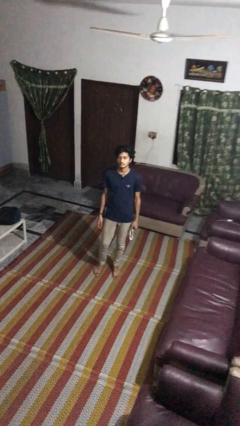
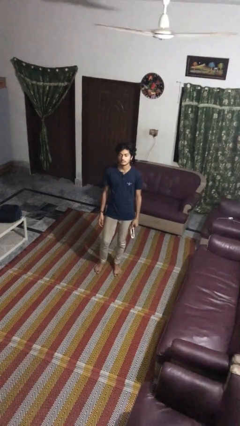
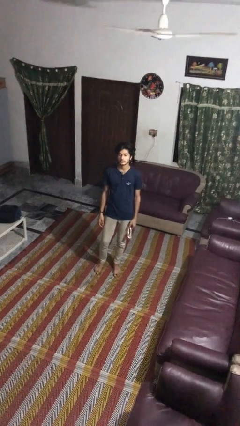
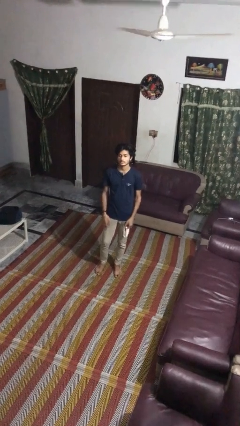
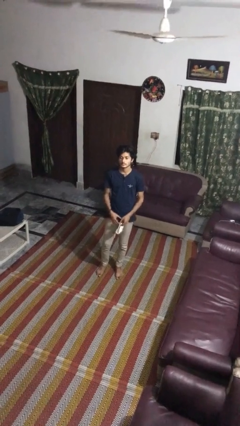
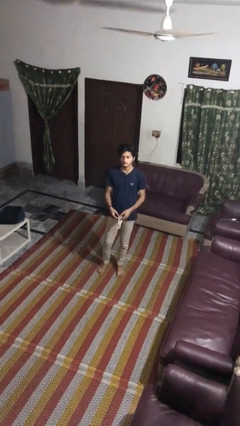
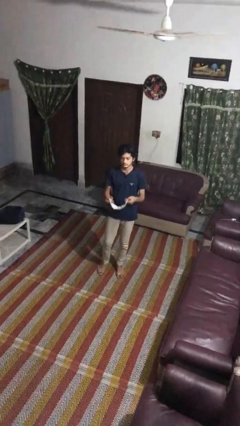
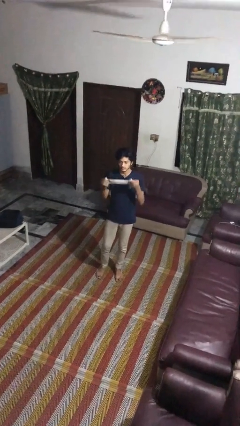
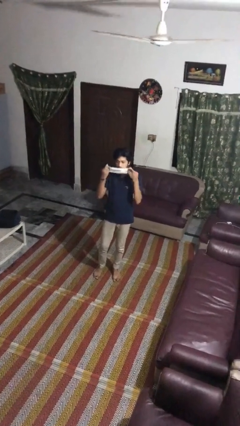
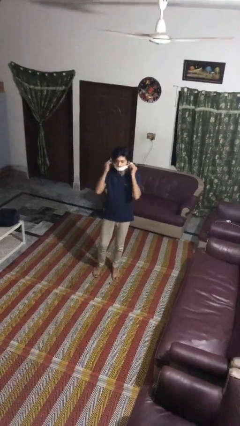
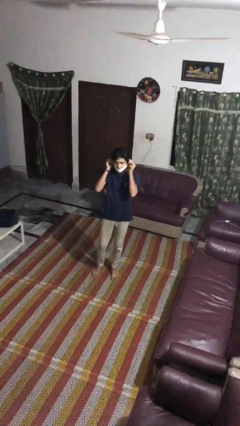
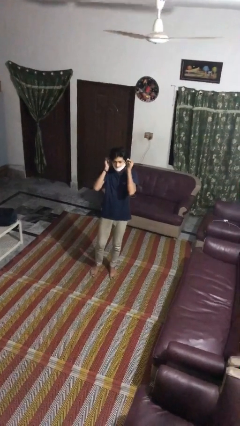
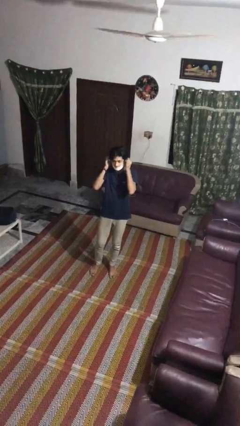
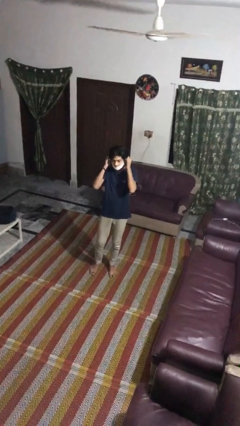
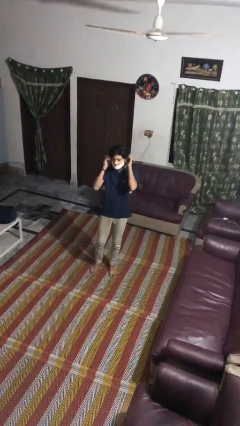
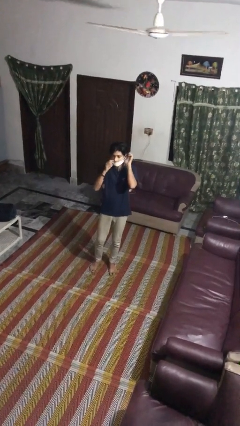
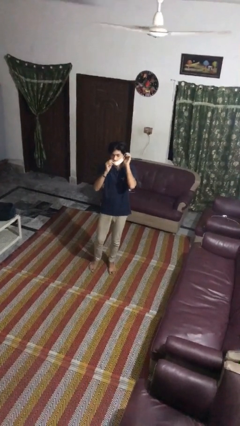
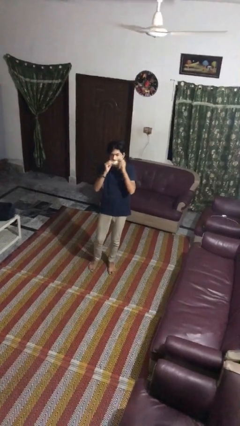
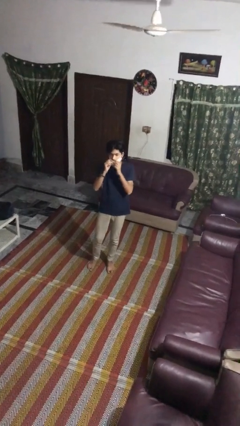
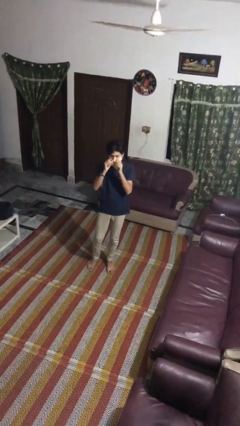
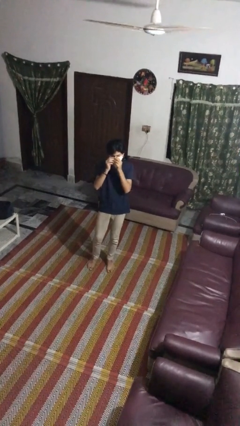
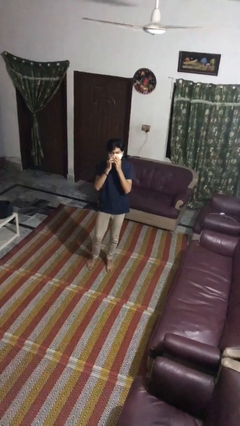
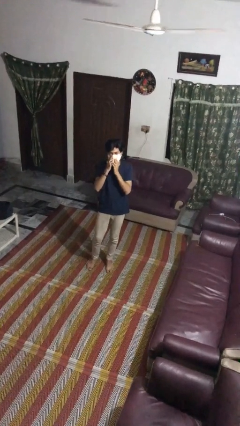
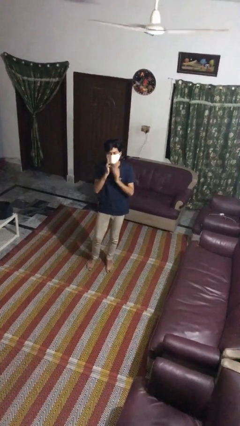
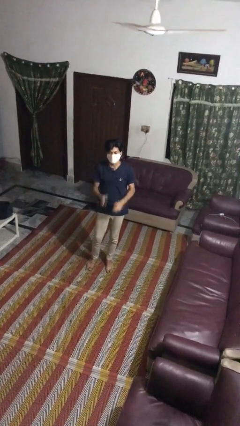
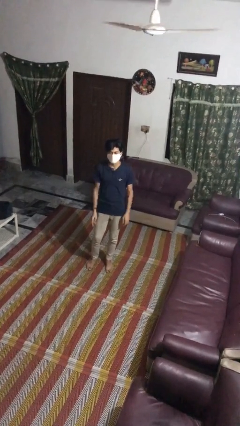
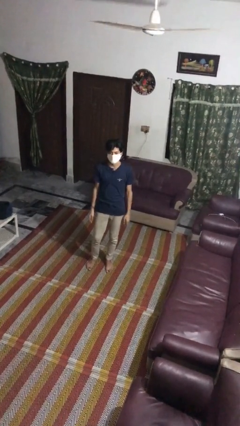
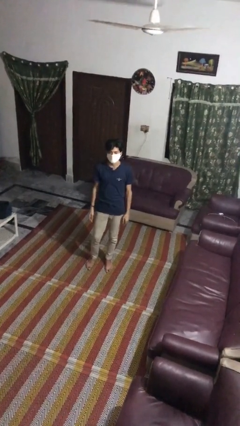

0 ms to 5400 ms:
person puts on facemask

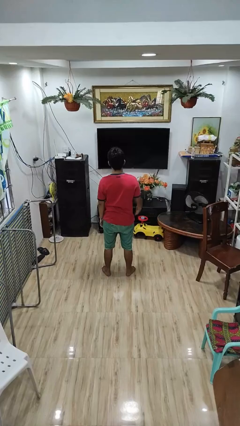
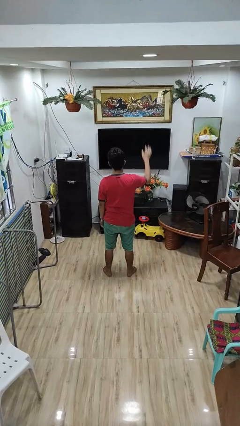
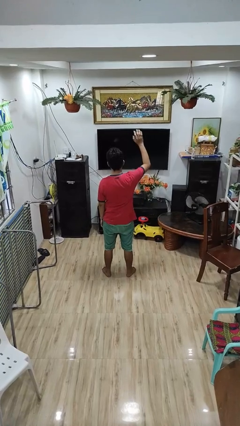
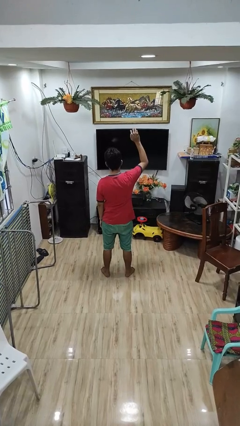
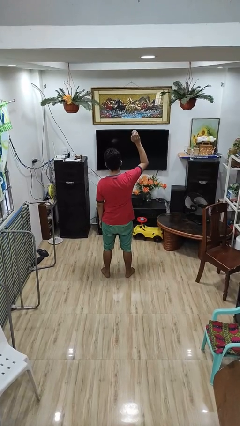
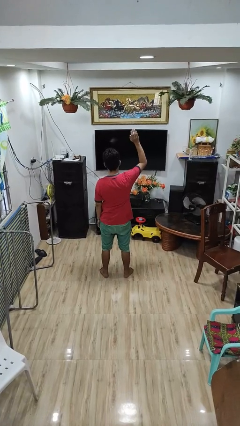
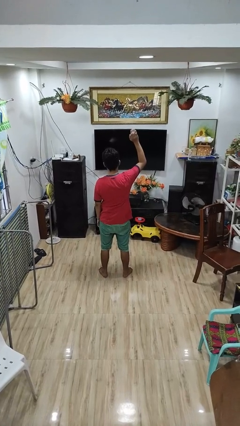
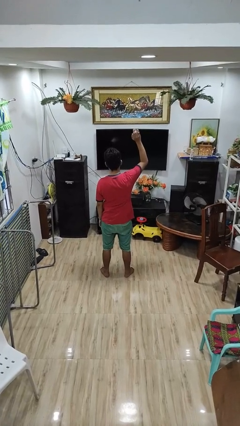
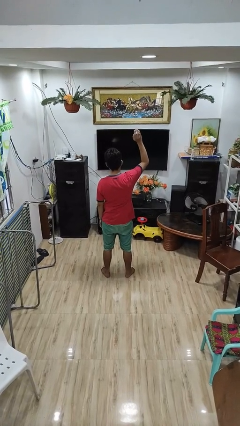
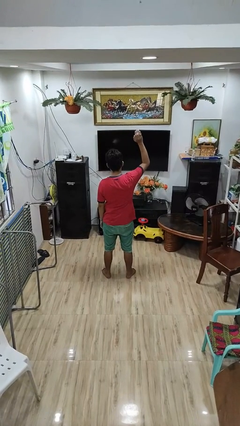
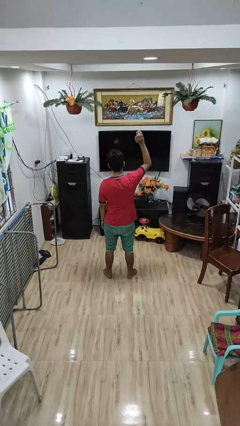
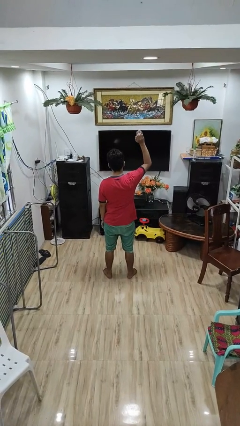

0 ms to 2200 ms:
person gestures raise hand

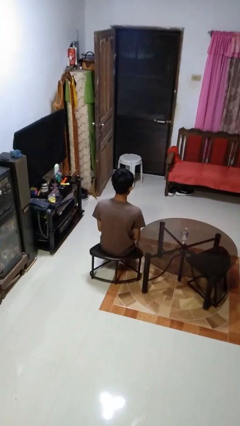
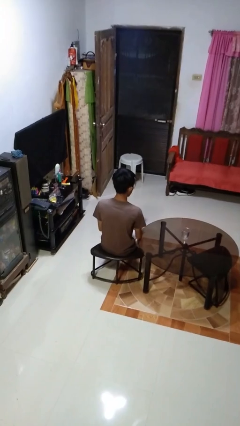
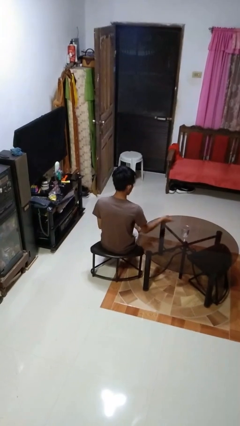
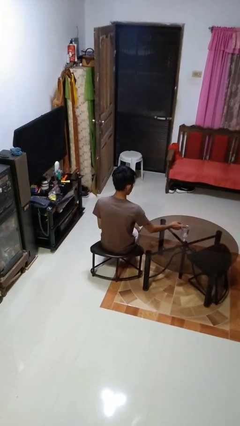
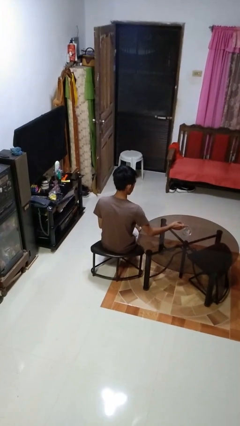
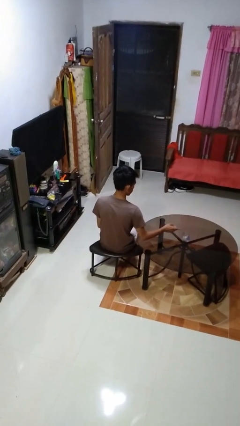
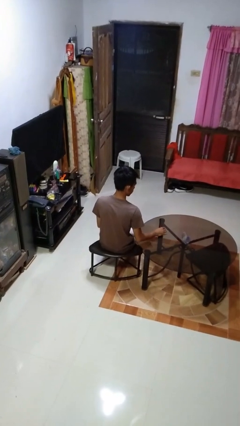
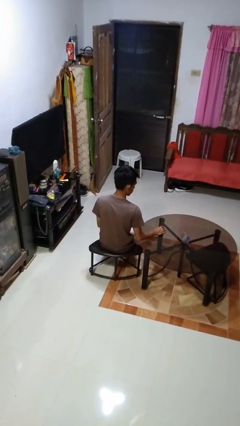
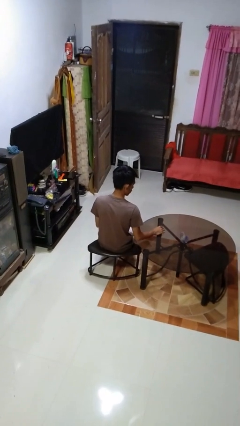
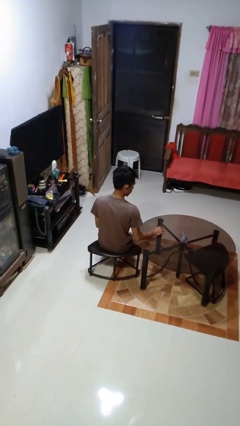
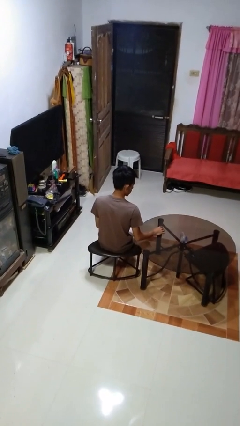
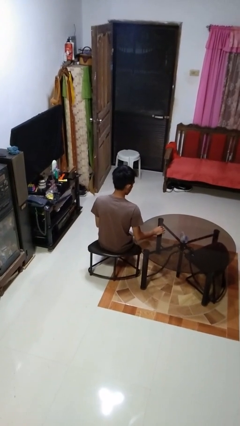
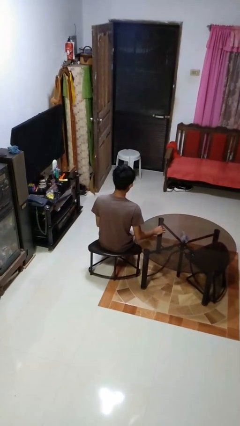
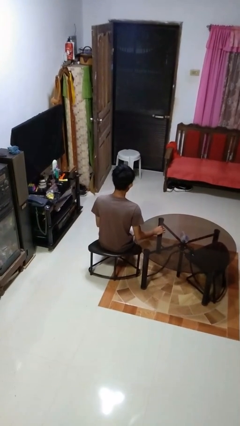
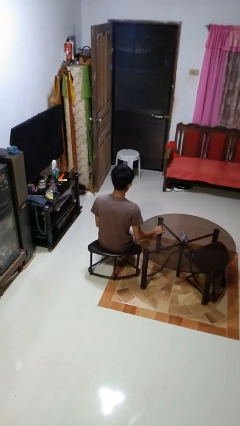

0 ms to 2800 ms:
person spills on table

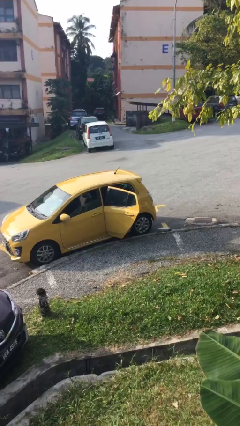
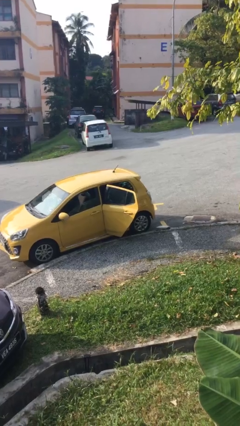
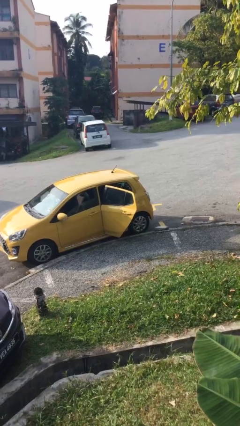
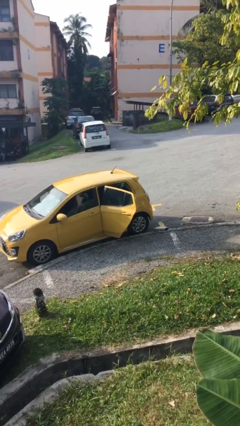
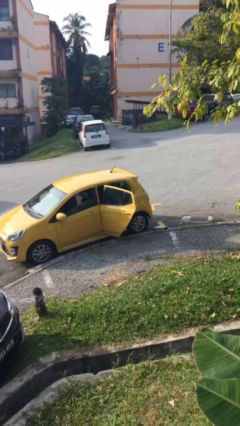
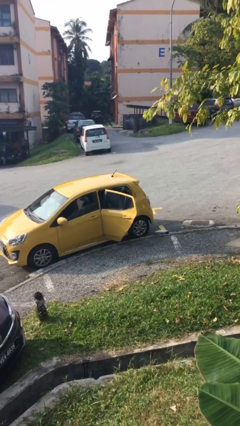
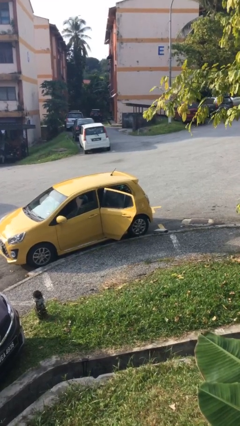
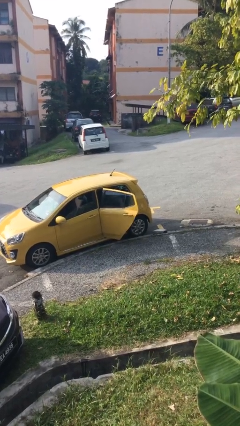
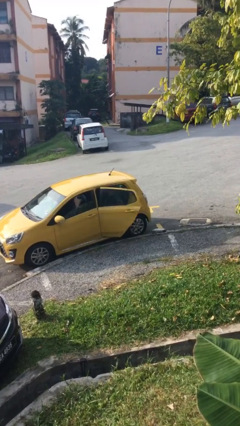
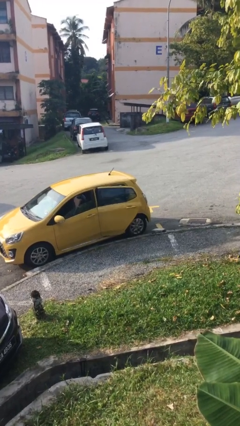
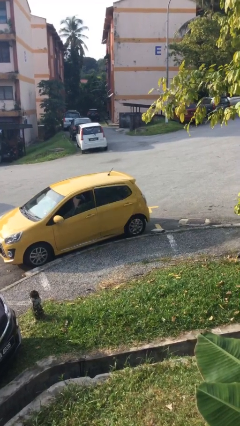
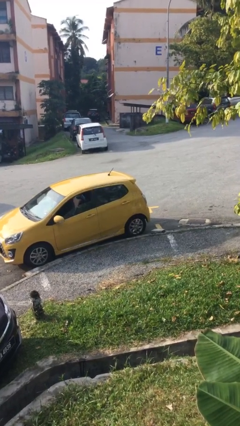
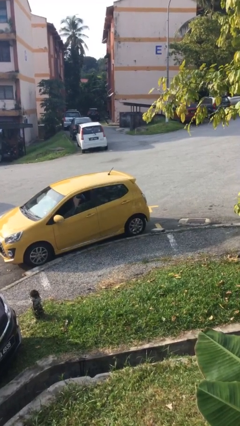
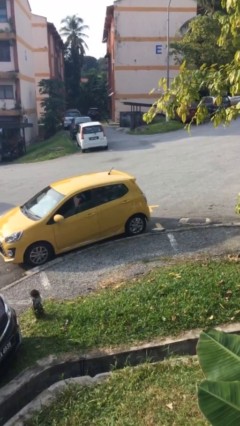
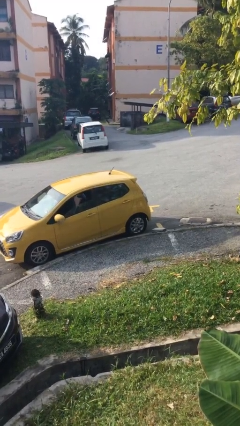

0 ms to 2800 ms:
person closes car door

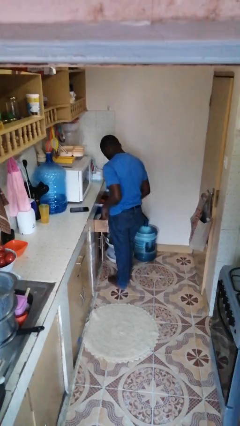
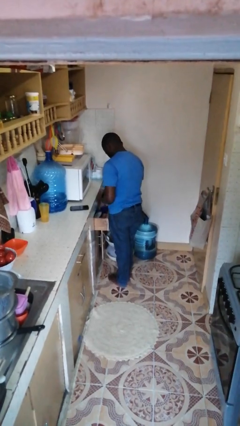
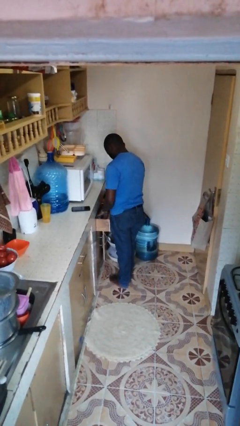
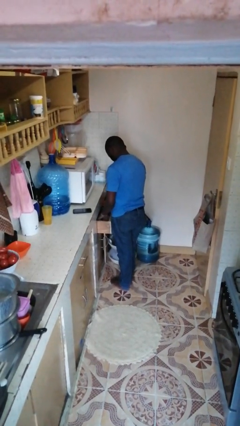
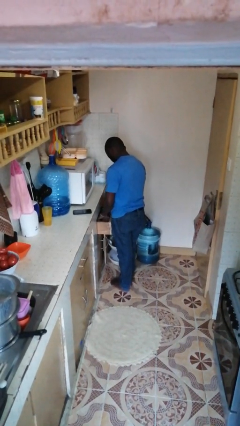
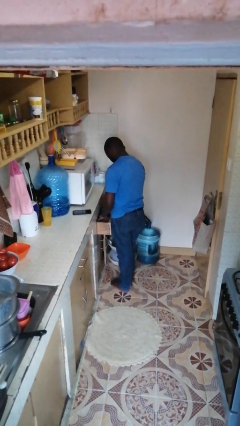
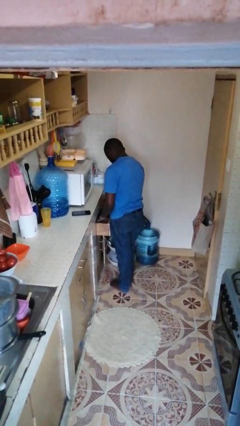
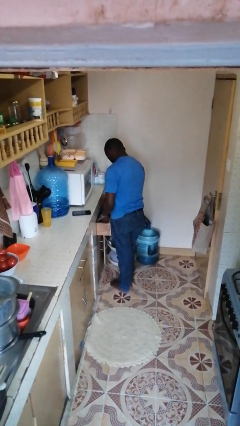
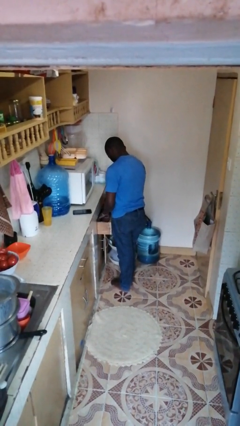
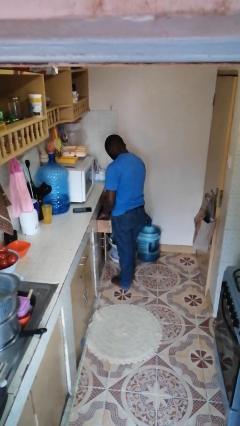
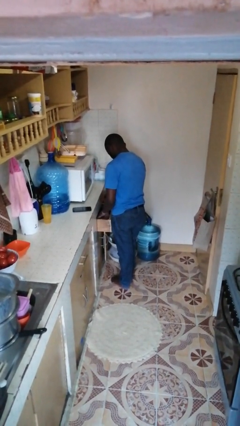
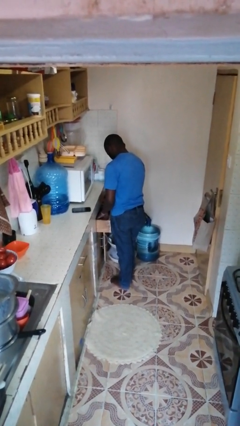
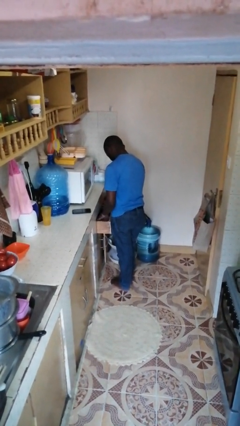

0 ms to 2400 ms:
person searches in kitchen drawer

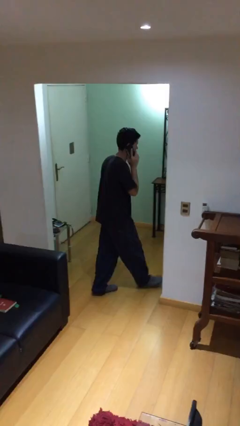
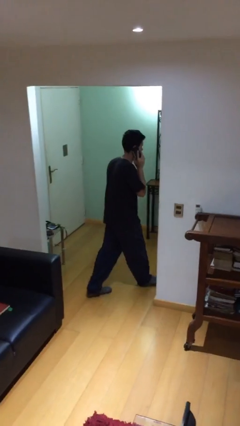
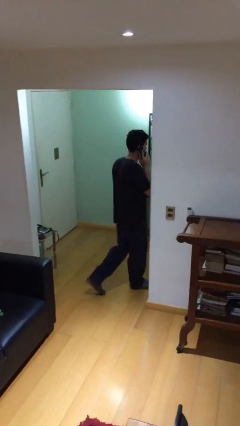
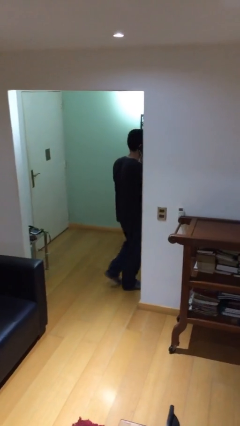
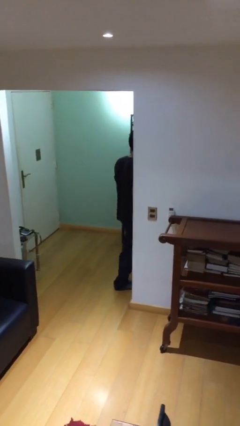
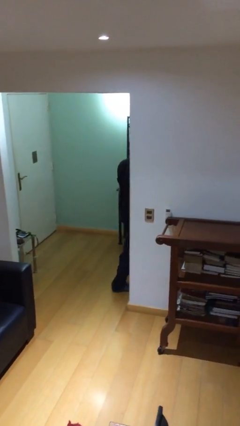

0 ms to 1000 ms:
person exits scene through structure

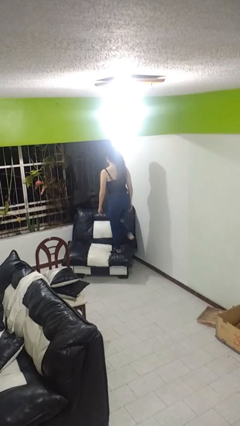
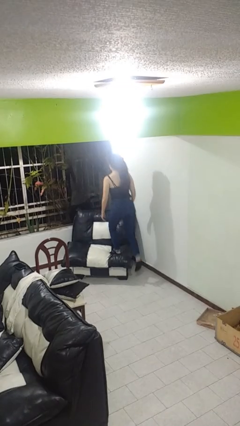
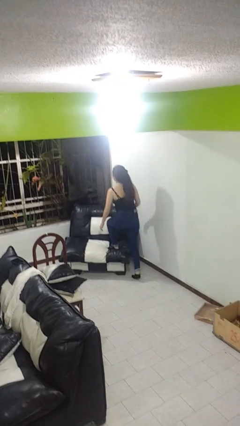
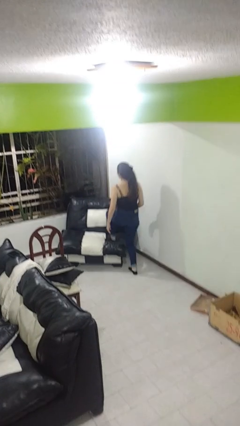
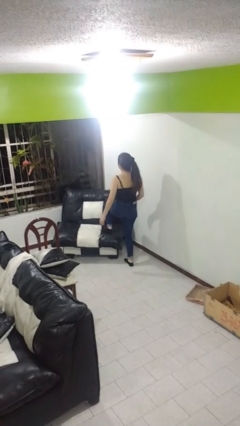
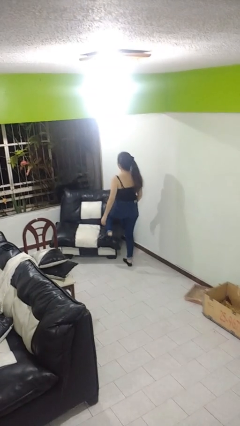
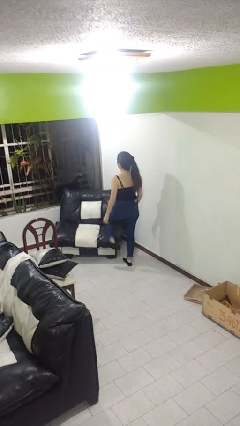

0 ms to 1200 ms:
person climbs off couch
